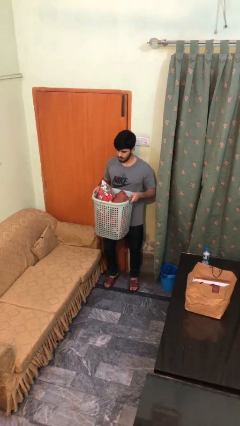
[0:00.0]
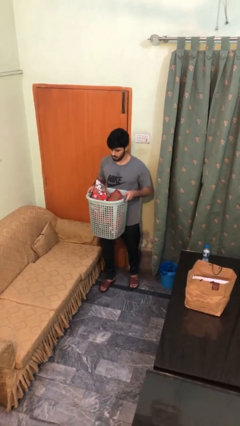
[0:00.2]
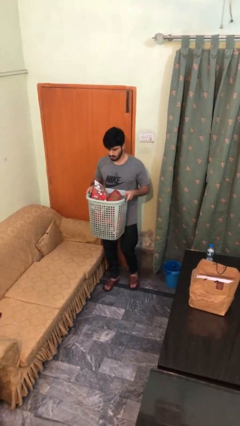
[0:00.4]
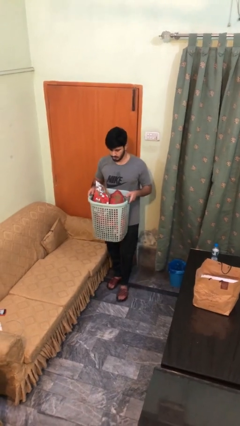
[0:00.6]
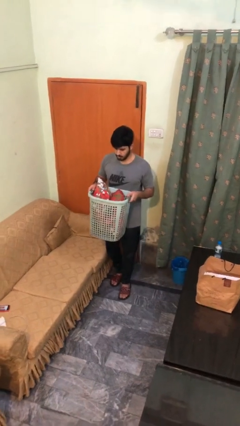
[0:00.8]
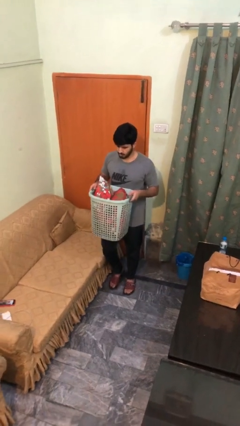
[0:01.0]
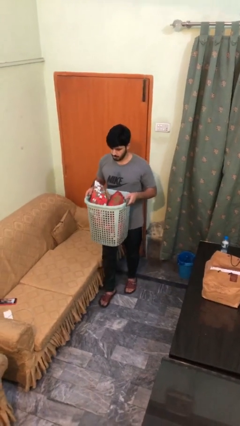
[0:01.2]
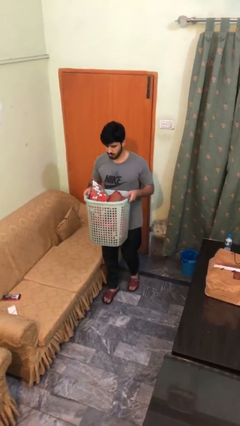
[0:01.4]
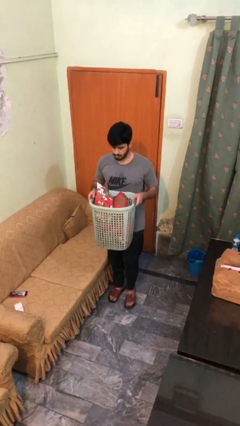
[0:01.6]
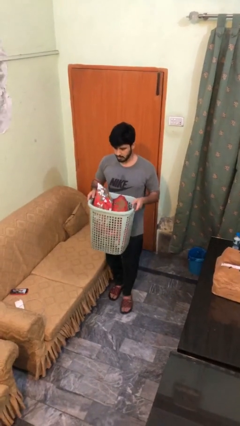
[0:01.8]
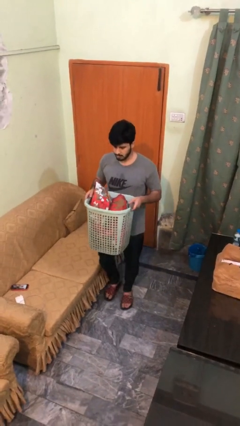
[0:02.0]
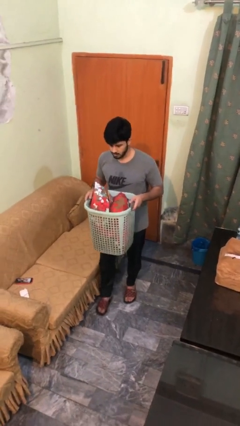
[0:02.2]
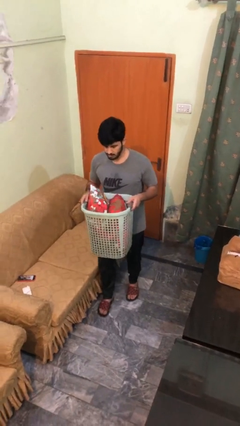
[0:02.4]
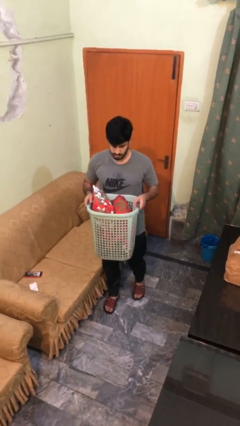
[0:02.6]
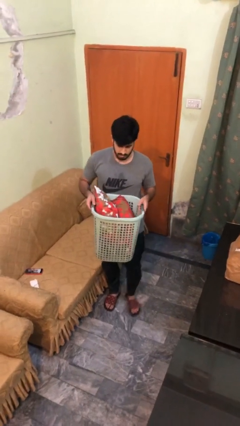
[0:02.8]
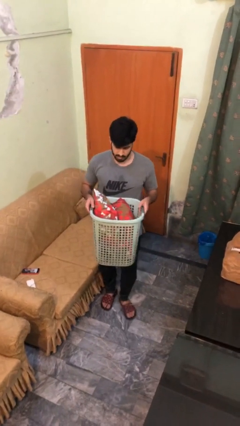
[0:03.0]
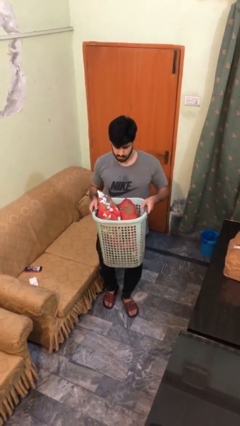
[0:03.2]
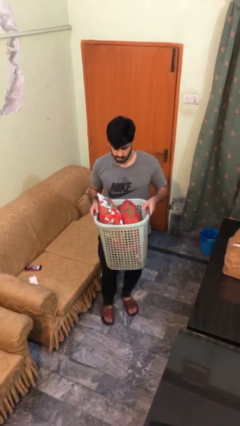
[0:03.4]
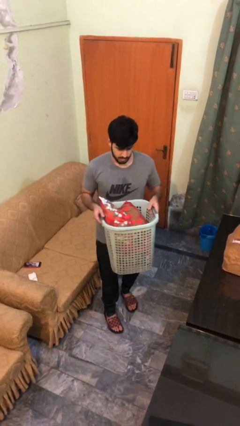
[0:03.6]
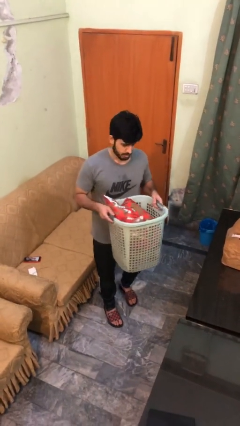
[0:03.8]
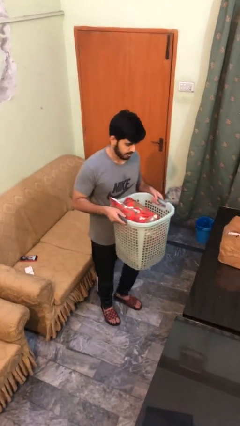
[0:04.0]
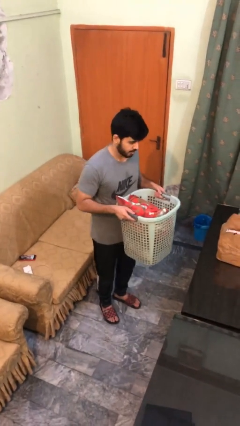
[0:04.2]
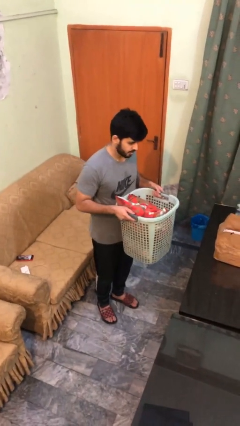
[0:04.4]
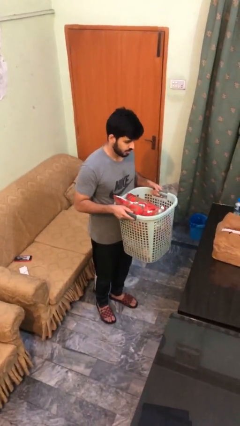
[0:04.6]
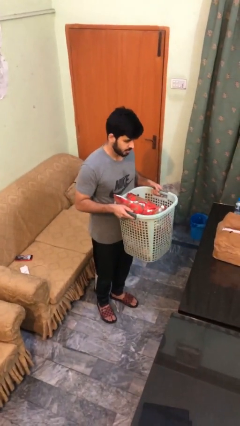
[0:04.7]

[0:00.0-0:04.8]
person carries laundry basket

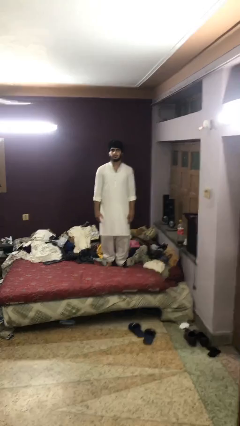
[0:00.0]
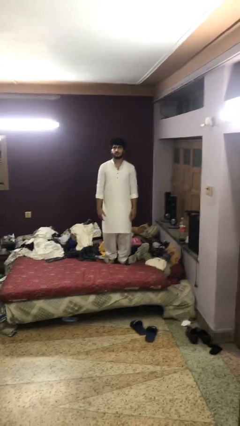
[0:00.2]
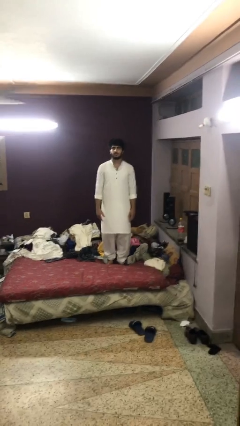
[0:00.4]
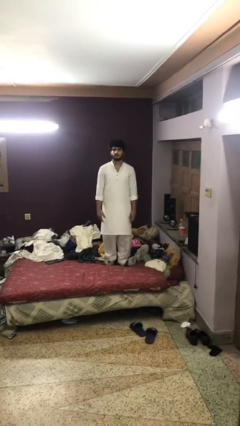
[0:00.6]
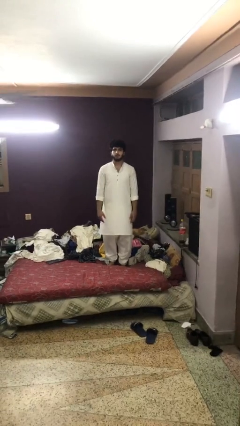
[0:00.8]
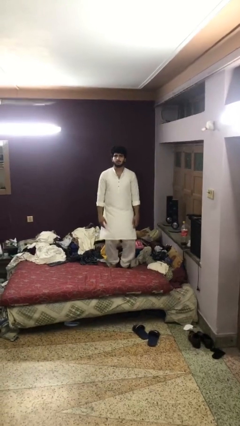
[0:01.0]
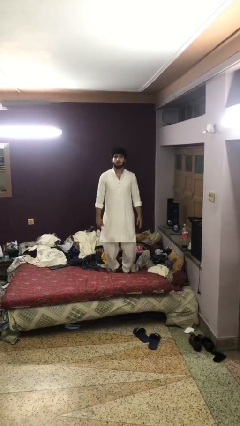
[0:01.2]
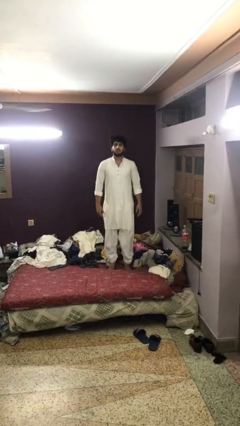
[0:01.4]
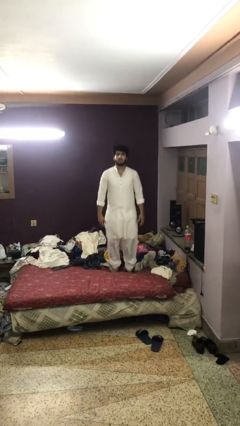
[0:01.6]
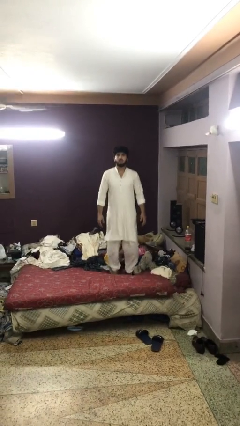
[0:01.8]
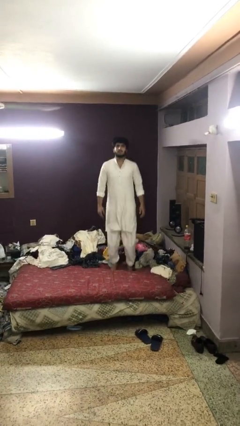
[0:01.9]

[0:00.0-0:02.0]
person jumps on bed

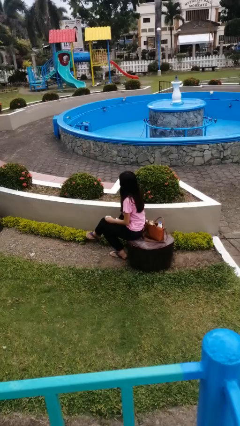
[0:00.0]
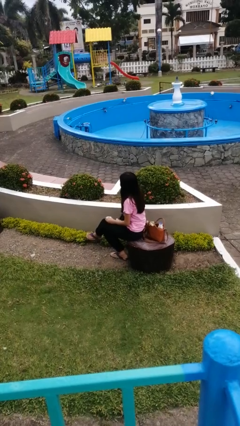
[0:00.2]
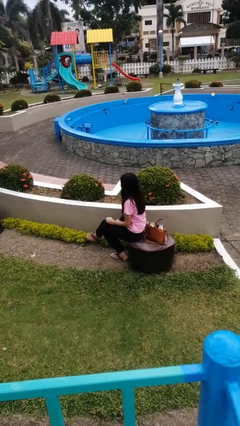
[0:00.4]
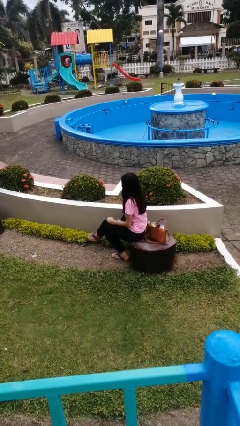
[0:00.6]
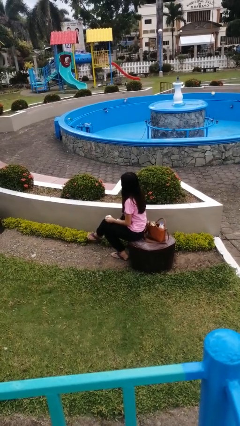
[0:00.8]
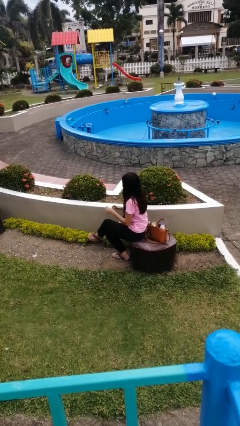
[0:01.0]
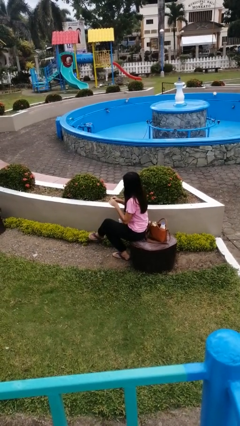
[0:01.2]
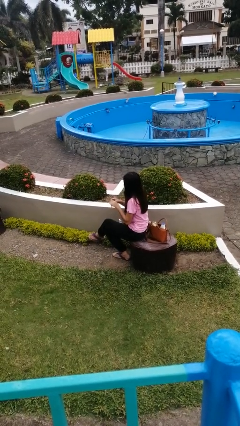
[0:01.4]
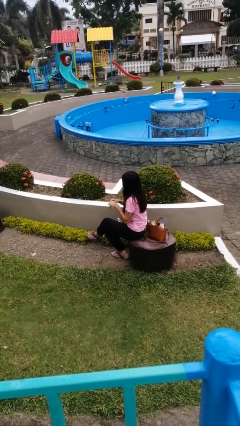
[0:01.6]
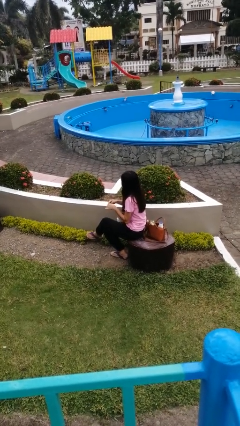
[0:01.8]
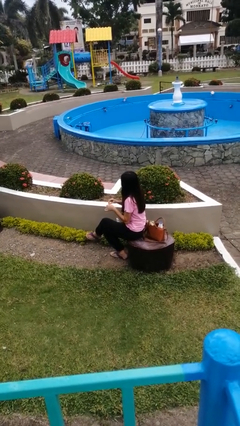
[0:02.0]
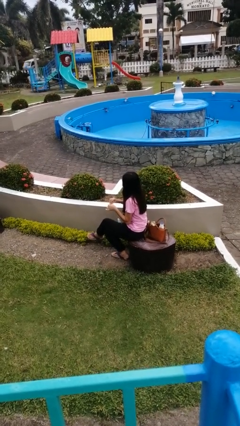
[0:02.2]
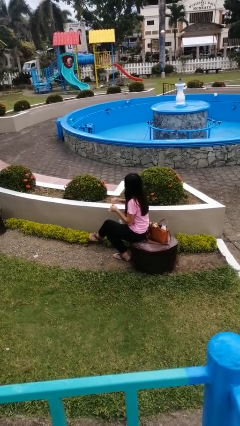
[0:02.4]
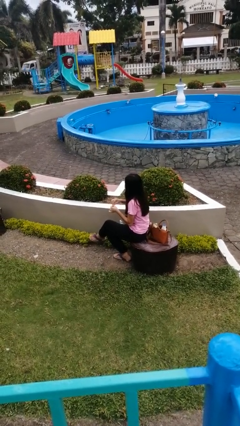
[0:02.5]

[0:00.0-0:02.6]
person takes medicine pills

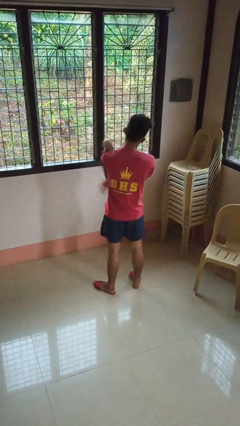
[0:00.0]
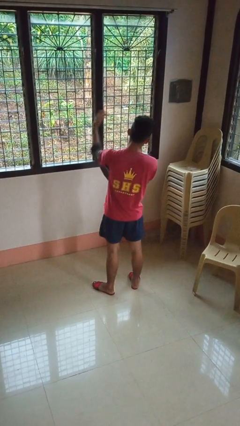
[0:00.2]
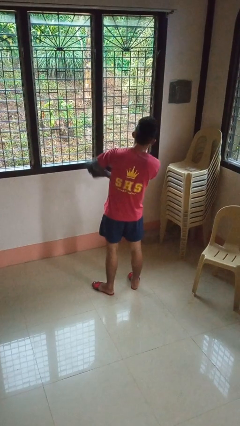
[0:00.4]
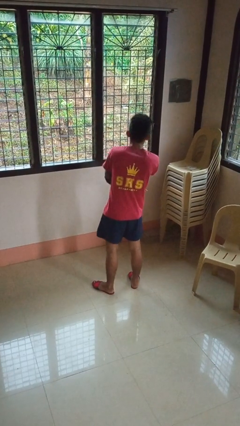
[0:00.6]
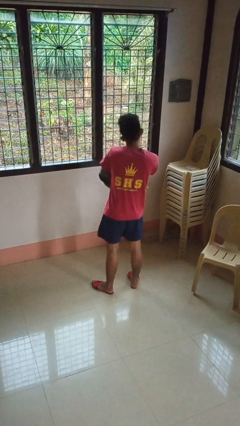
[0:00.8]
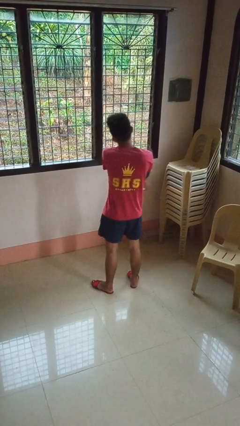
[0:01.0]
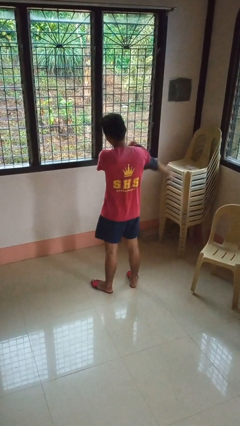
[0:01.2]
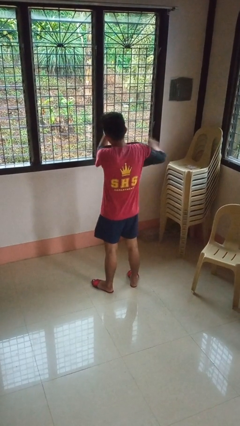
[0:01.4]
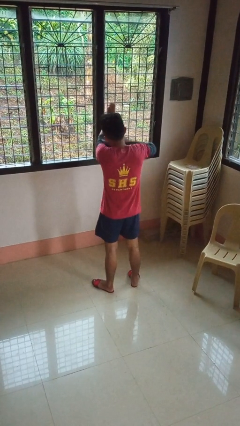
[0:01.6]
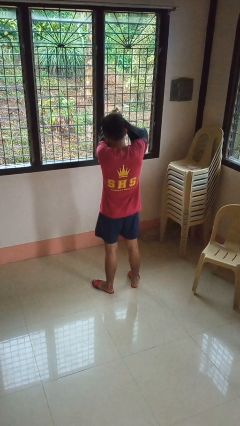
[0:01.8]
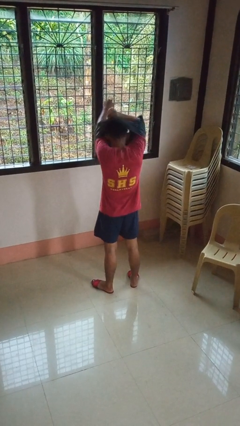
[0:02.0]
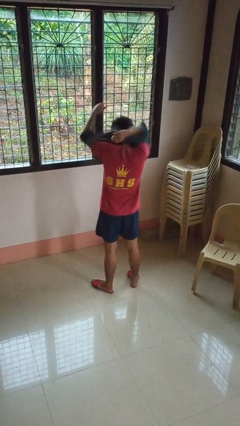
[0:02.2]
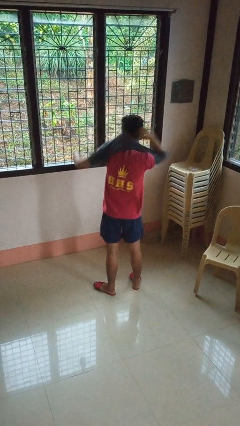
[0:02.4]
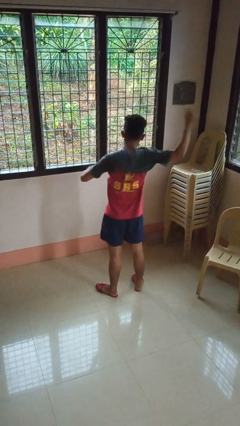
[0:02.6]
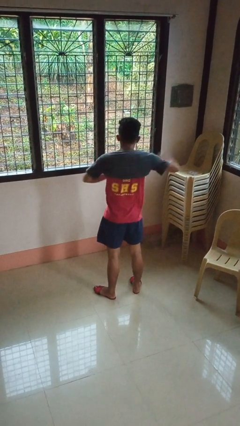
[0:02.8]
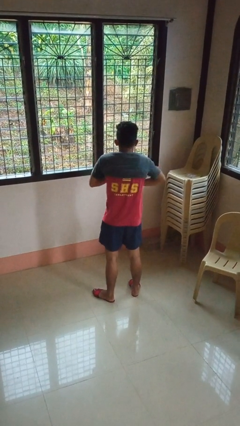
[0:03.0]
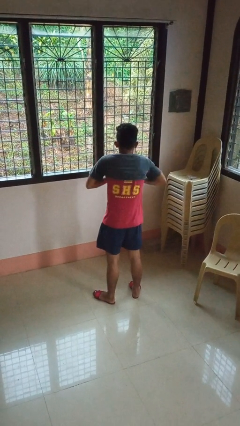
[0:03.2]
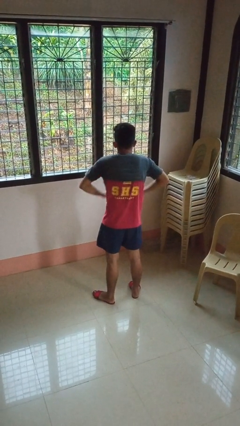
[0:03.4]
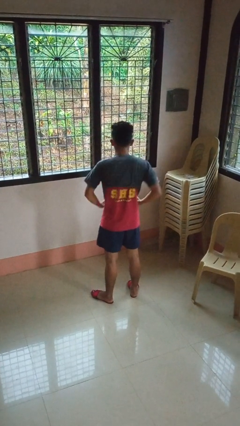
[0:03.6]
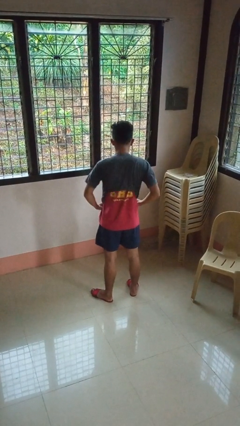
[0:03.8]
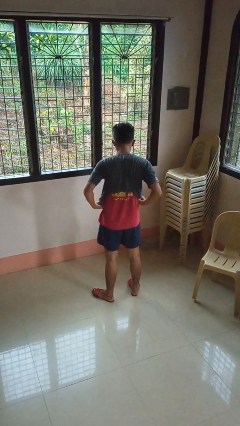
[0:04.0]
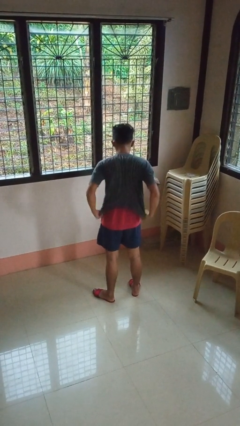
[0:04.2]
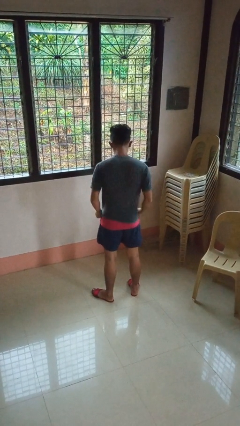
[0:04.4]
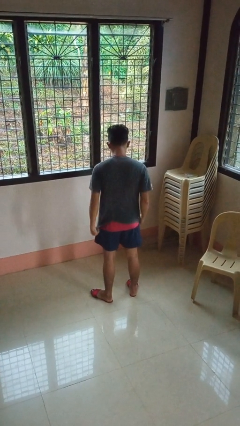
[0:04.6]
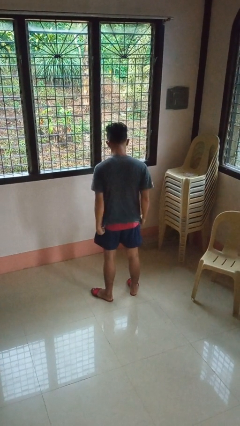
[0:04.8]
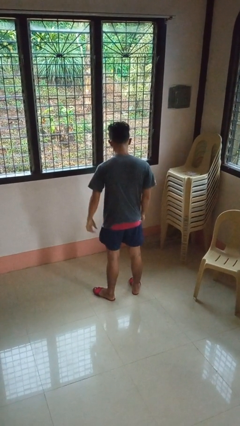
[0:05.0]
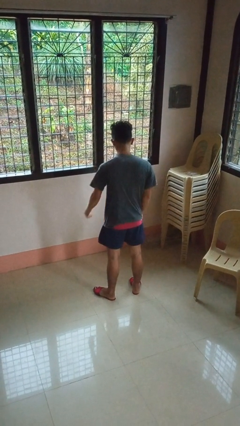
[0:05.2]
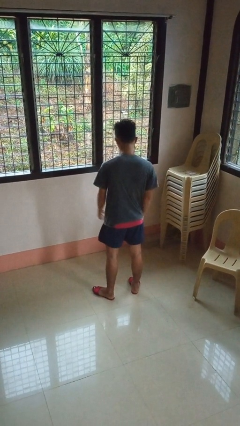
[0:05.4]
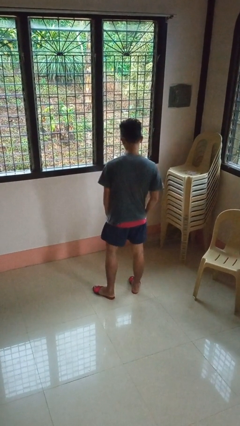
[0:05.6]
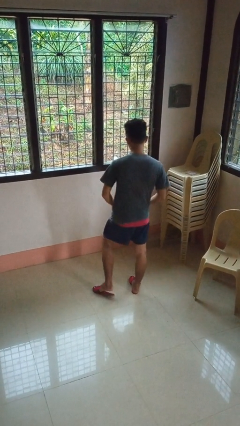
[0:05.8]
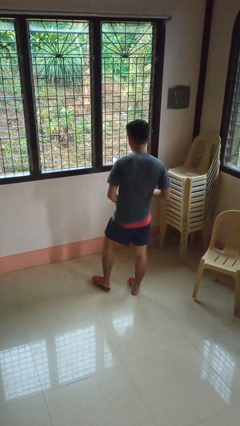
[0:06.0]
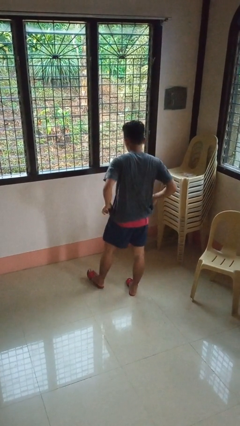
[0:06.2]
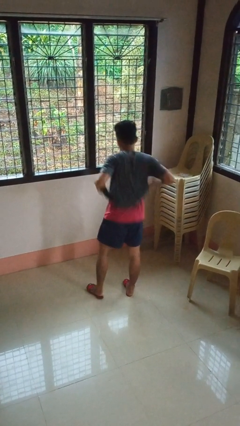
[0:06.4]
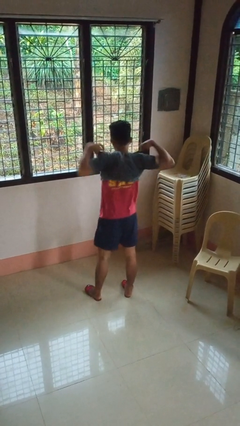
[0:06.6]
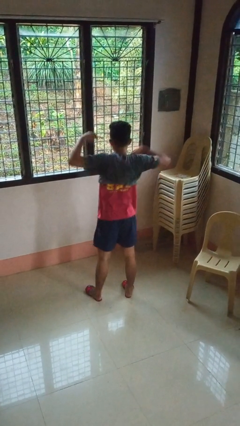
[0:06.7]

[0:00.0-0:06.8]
person puts on shirt

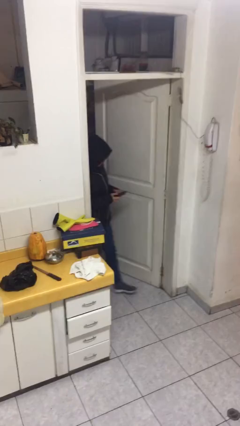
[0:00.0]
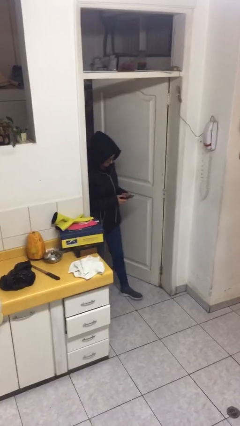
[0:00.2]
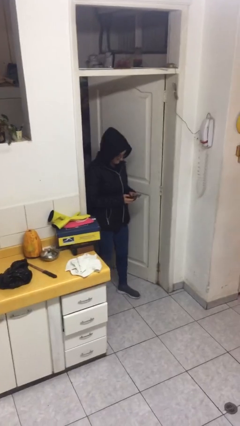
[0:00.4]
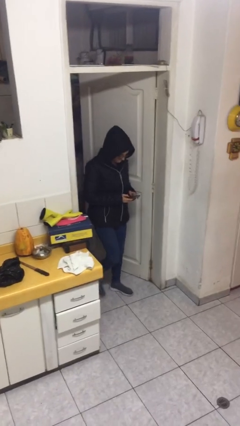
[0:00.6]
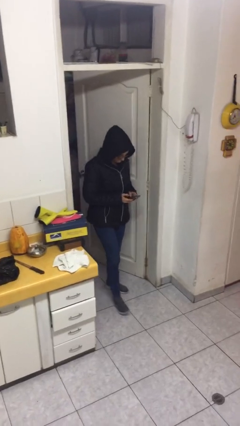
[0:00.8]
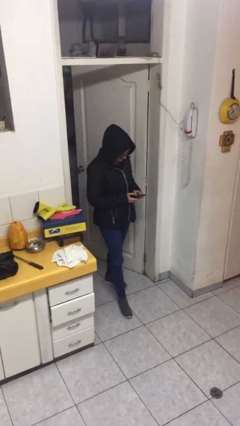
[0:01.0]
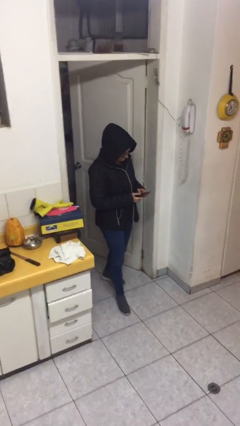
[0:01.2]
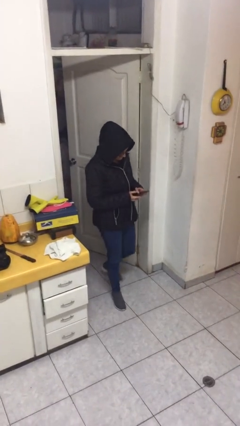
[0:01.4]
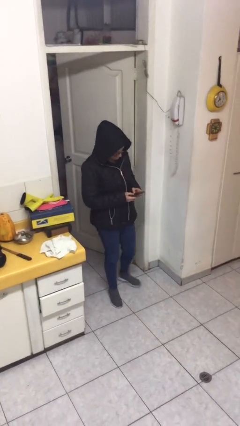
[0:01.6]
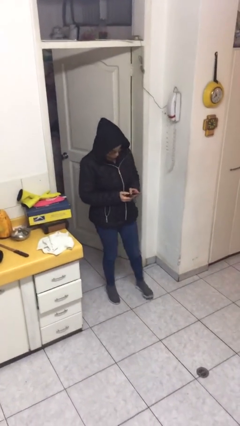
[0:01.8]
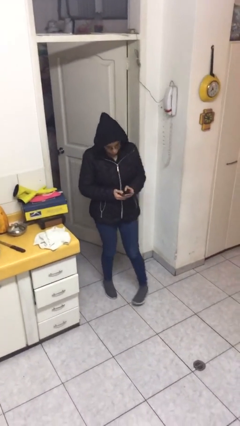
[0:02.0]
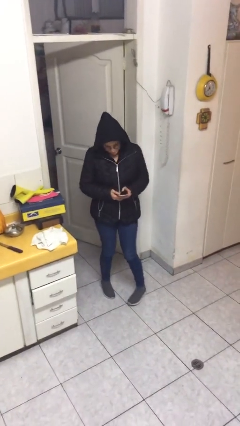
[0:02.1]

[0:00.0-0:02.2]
person enters scene through structure
